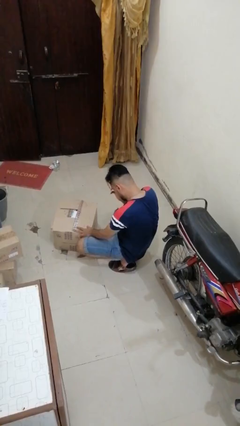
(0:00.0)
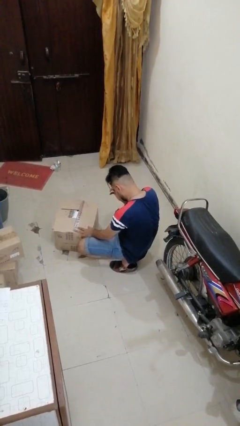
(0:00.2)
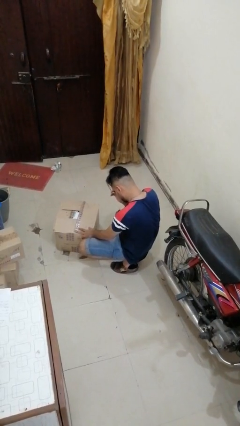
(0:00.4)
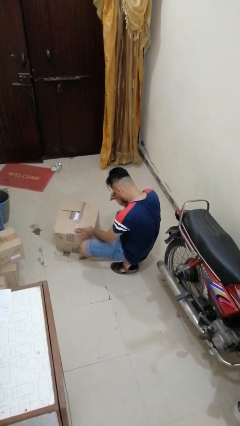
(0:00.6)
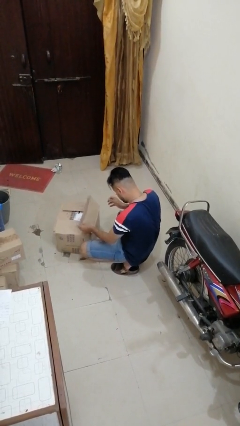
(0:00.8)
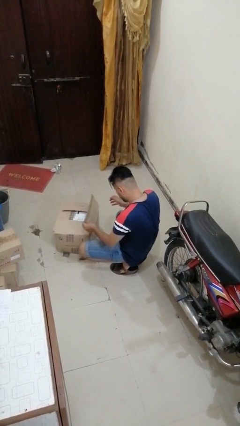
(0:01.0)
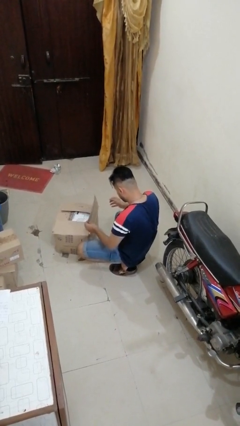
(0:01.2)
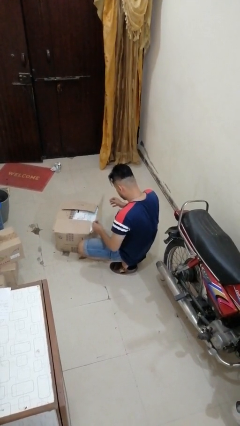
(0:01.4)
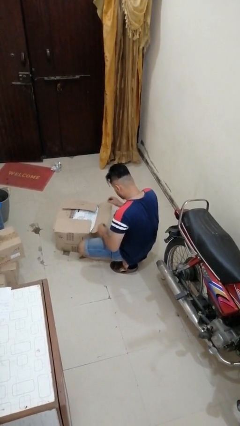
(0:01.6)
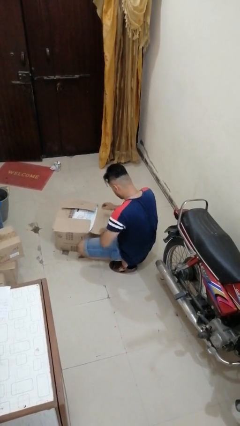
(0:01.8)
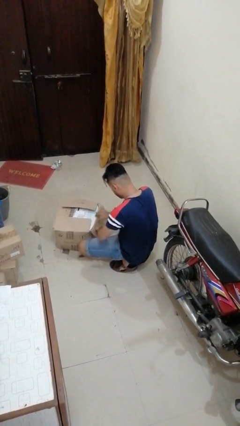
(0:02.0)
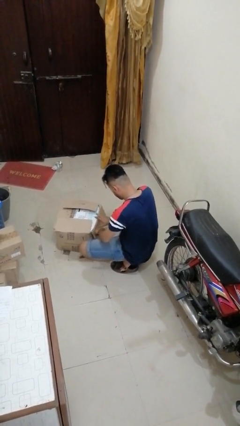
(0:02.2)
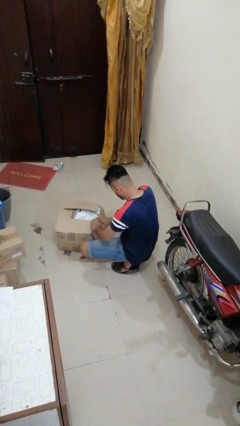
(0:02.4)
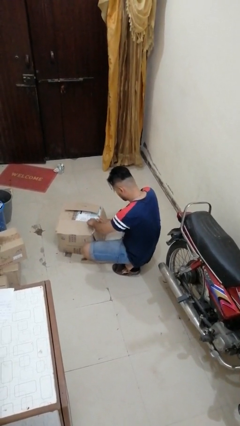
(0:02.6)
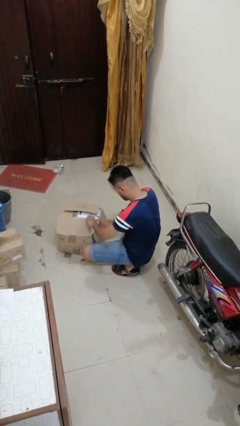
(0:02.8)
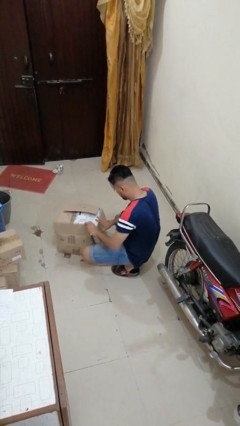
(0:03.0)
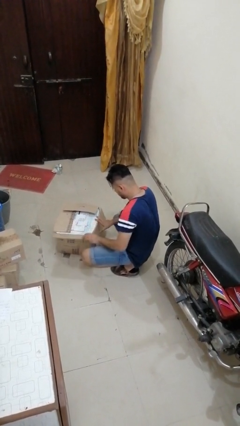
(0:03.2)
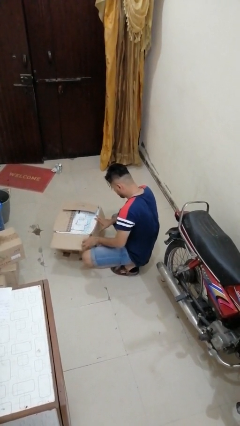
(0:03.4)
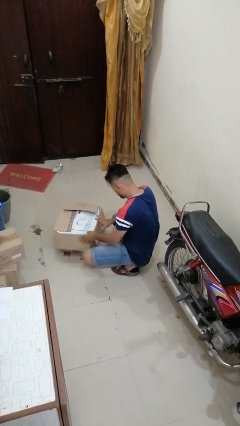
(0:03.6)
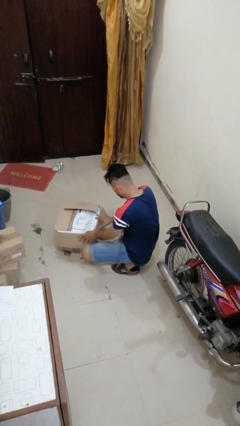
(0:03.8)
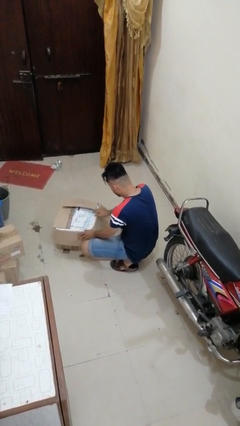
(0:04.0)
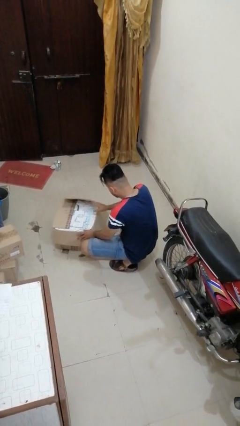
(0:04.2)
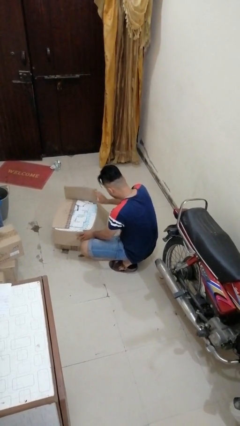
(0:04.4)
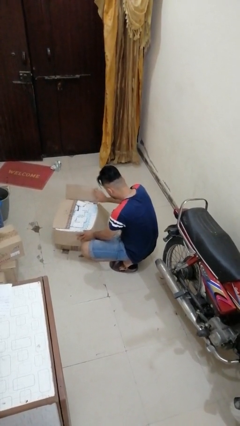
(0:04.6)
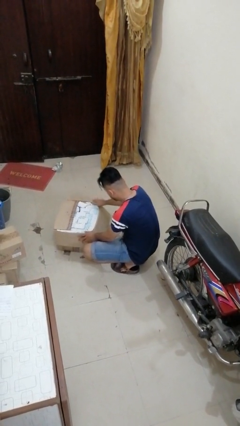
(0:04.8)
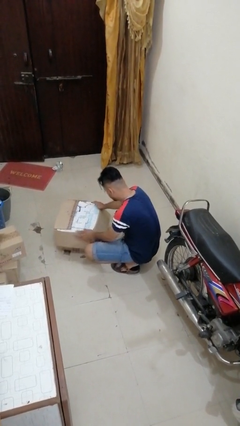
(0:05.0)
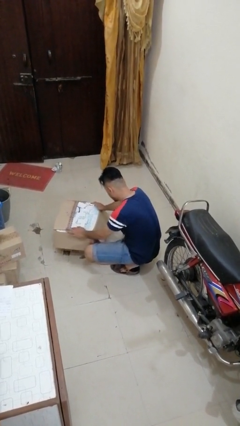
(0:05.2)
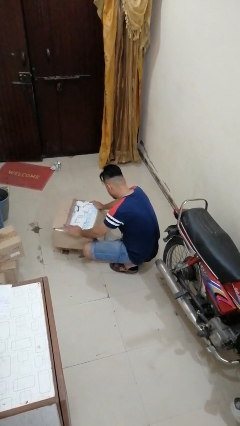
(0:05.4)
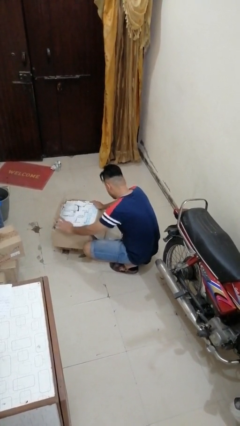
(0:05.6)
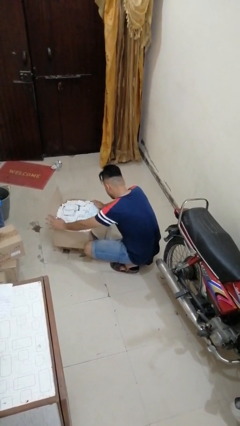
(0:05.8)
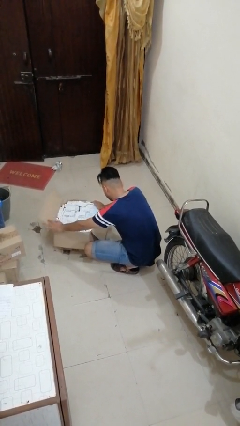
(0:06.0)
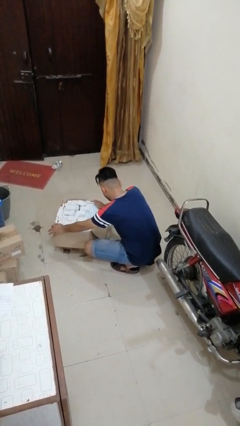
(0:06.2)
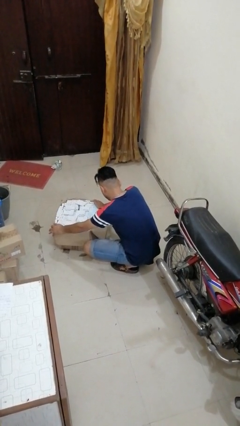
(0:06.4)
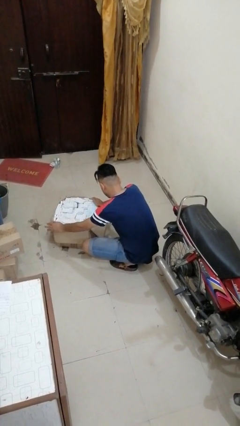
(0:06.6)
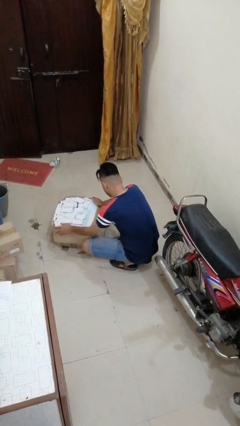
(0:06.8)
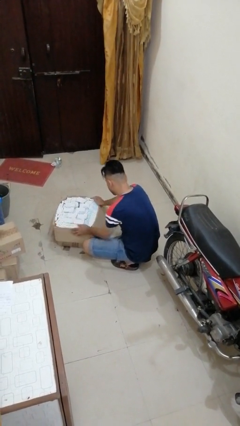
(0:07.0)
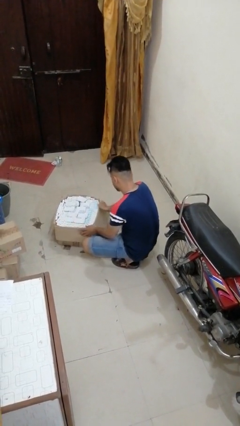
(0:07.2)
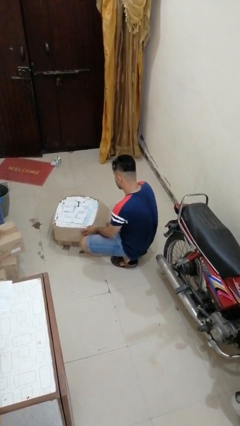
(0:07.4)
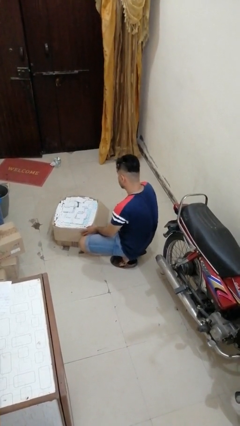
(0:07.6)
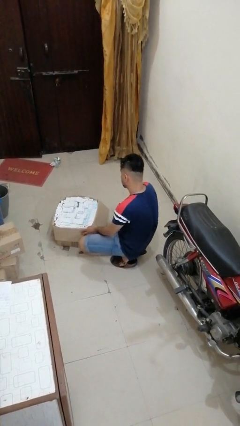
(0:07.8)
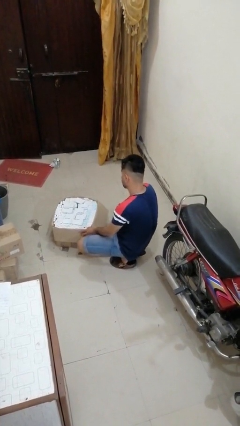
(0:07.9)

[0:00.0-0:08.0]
person opens box

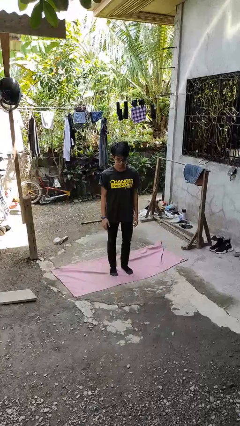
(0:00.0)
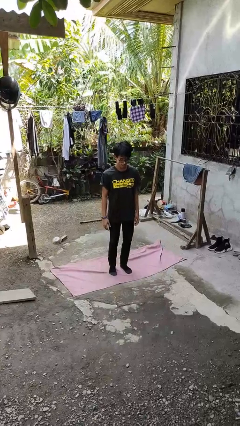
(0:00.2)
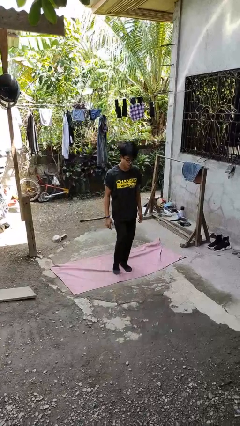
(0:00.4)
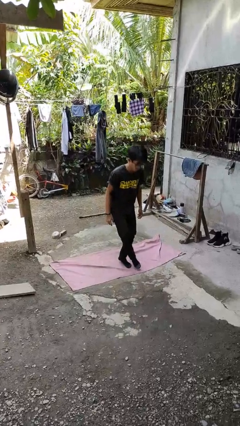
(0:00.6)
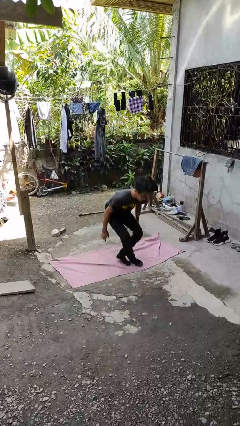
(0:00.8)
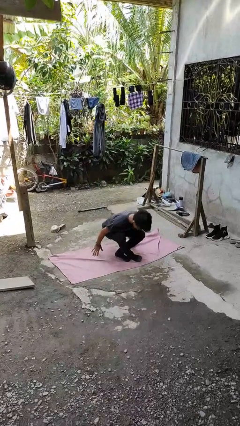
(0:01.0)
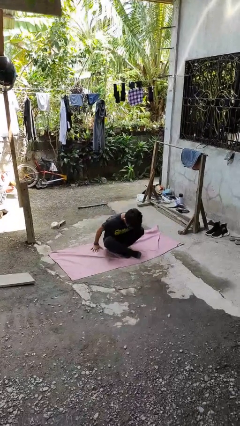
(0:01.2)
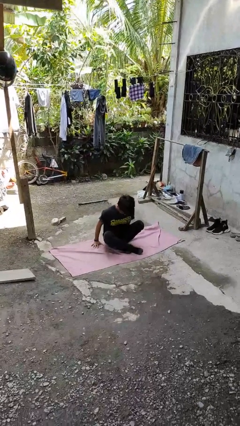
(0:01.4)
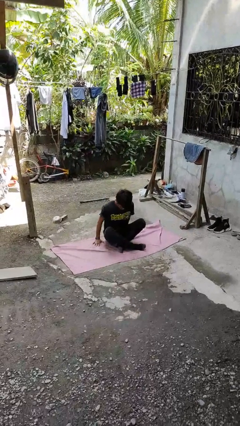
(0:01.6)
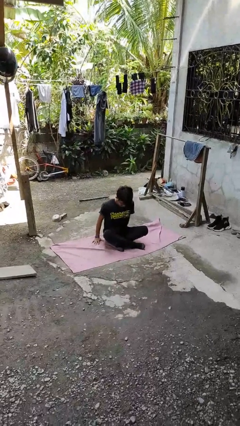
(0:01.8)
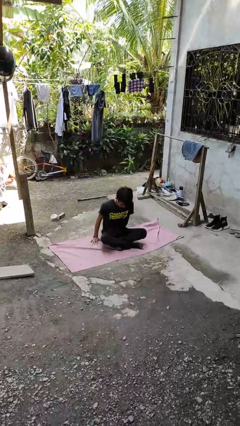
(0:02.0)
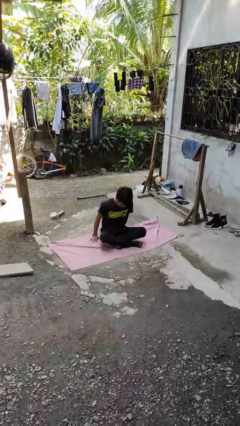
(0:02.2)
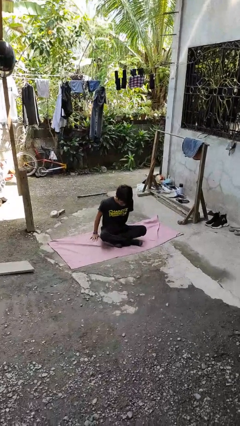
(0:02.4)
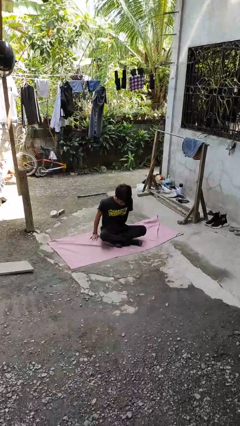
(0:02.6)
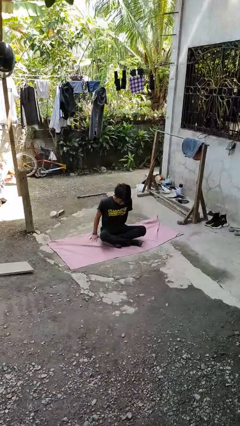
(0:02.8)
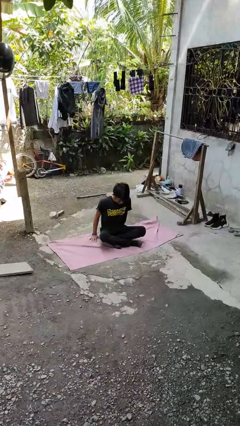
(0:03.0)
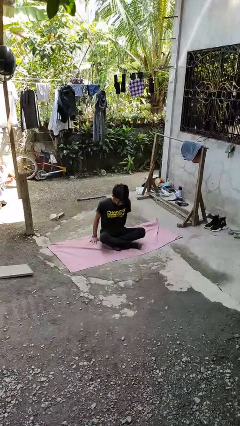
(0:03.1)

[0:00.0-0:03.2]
person sits crisscross

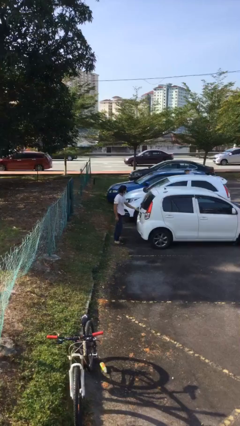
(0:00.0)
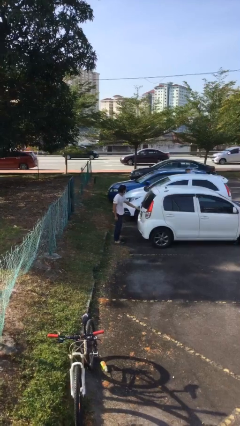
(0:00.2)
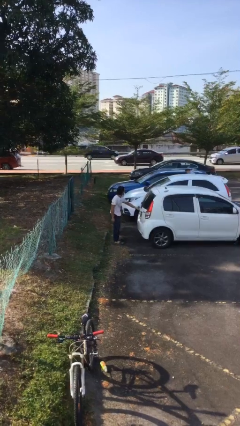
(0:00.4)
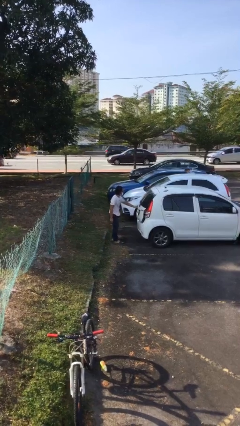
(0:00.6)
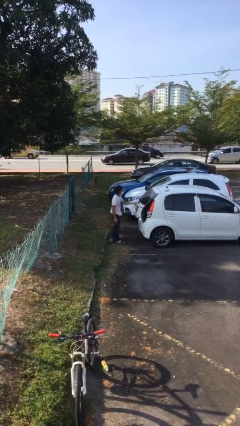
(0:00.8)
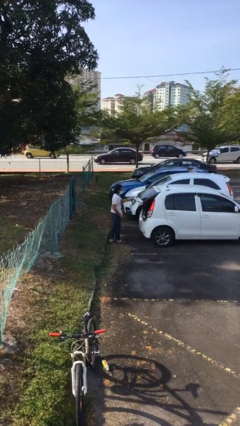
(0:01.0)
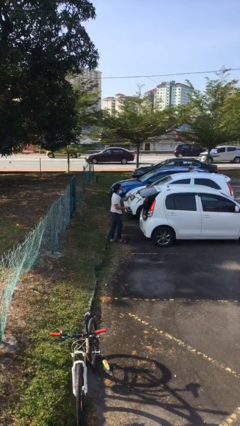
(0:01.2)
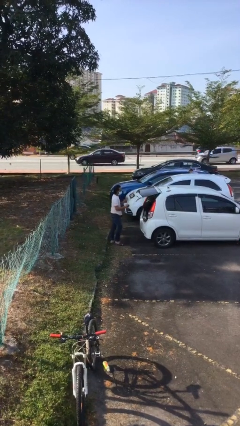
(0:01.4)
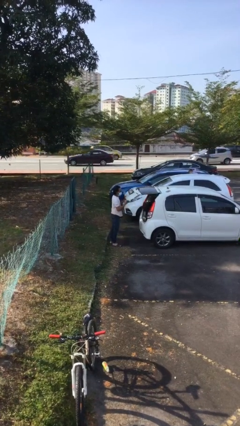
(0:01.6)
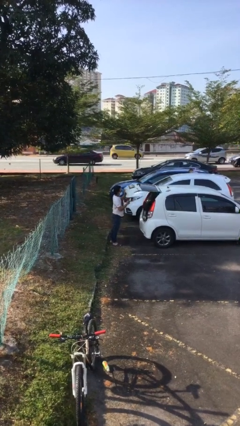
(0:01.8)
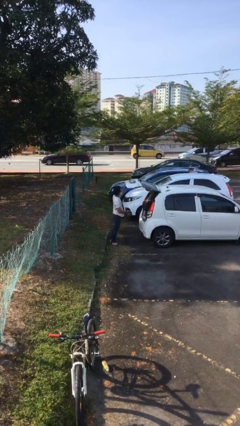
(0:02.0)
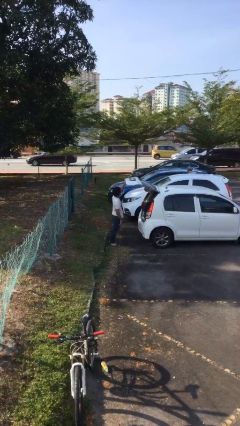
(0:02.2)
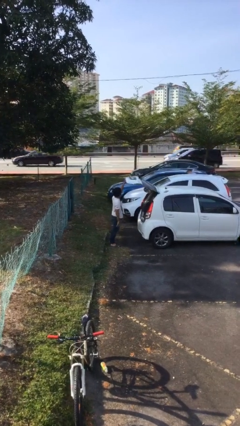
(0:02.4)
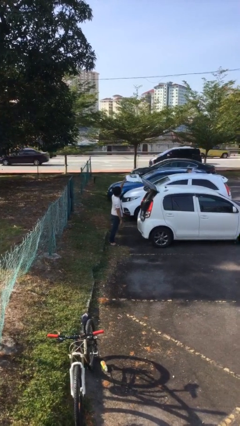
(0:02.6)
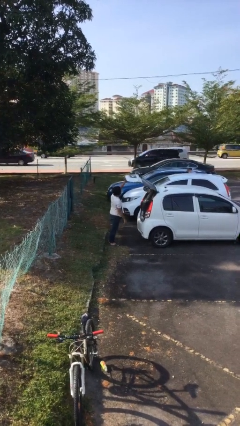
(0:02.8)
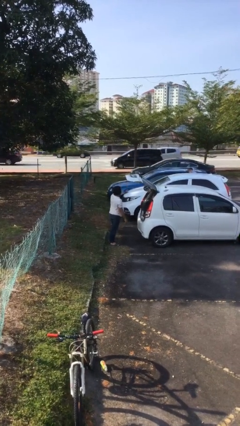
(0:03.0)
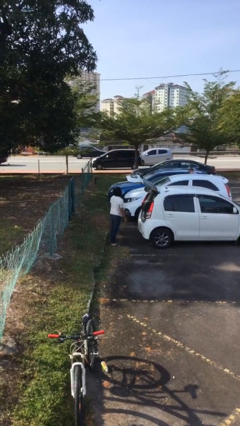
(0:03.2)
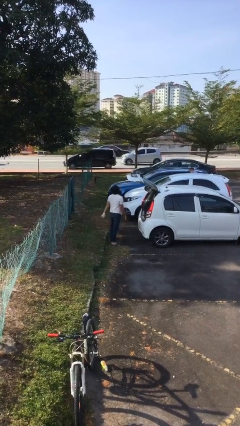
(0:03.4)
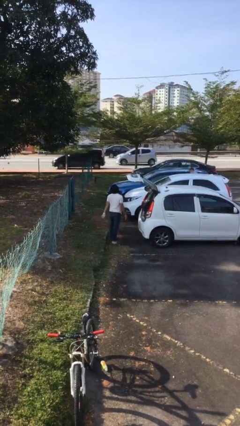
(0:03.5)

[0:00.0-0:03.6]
person opens car trunk

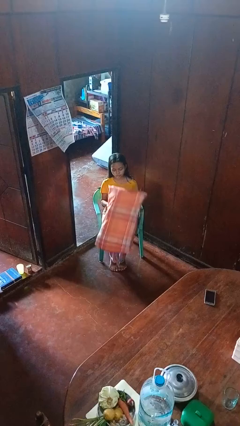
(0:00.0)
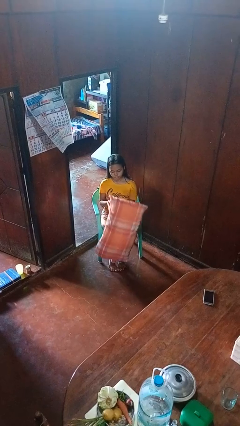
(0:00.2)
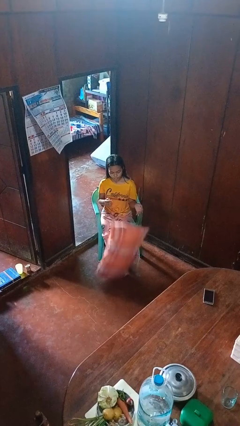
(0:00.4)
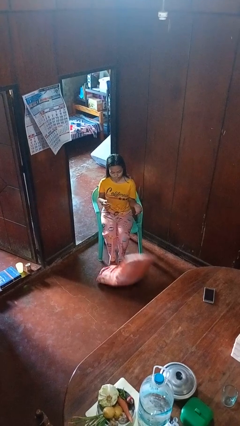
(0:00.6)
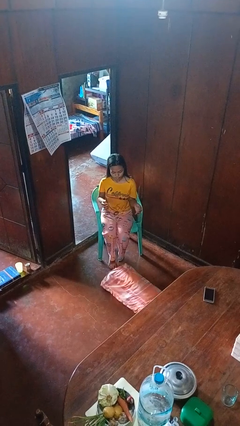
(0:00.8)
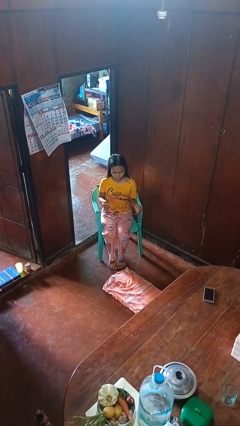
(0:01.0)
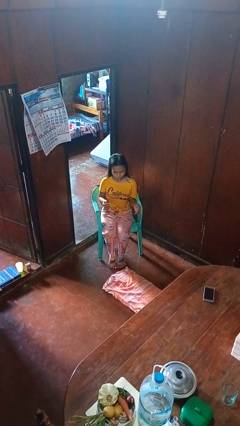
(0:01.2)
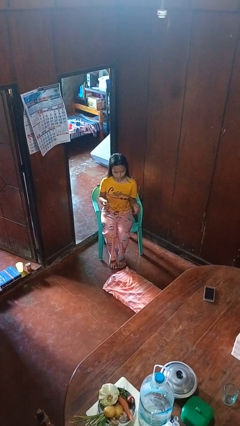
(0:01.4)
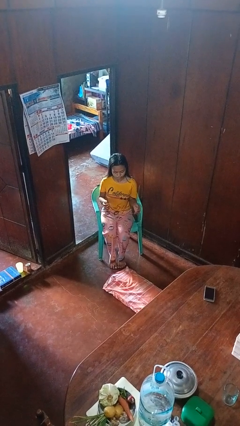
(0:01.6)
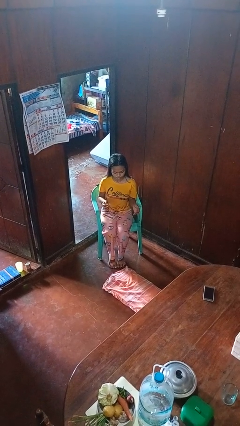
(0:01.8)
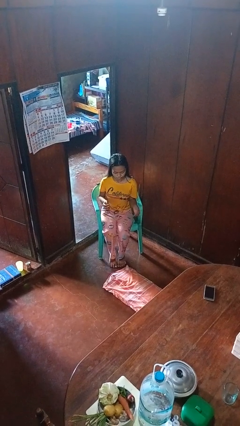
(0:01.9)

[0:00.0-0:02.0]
person drops object

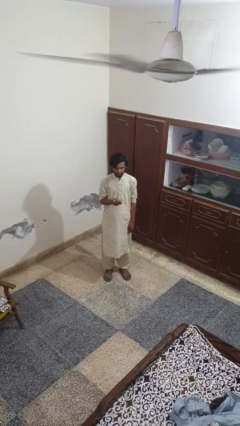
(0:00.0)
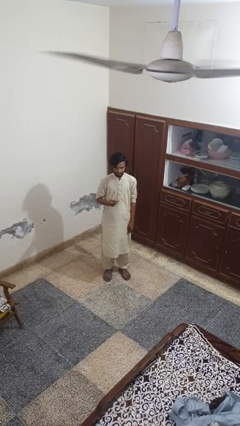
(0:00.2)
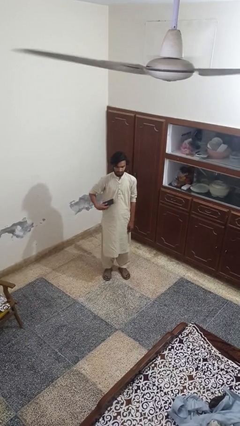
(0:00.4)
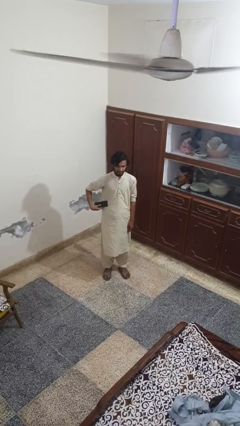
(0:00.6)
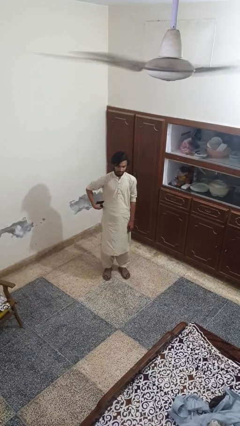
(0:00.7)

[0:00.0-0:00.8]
person puts phone into pocket
